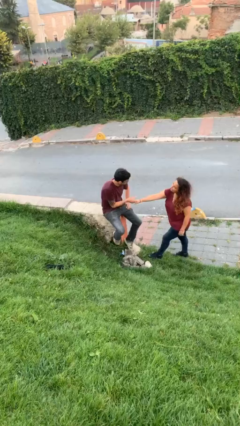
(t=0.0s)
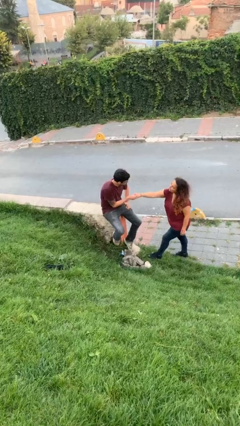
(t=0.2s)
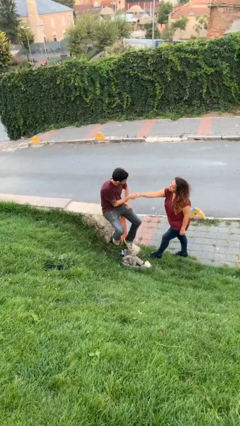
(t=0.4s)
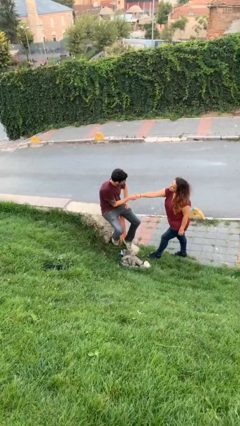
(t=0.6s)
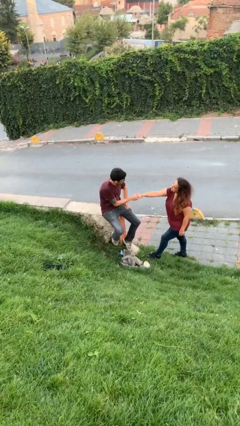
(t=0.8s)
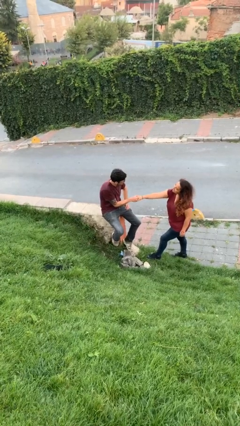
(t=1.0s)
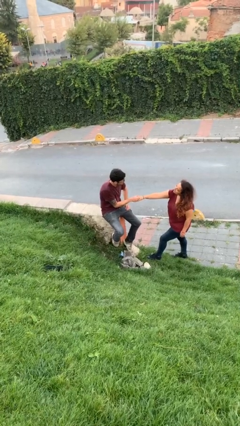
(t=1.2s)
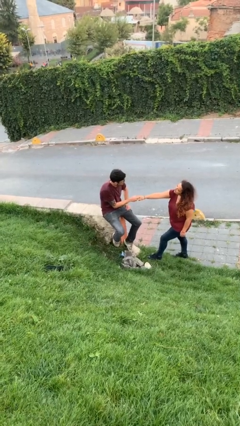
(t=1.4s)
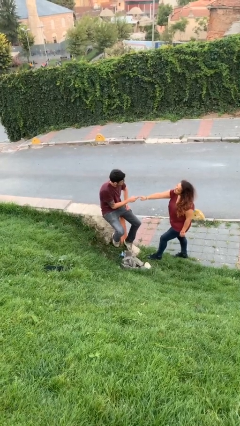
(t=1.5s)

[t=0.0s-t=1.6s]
person shakes hand

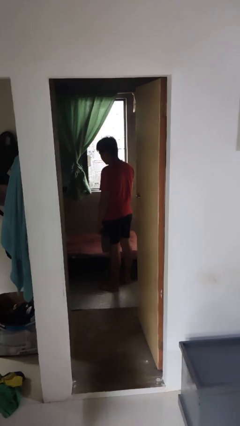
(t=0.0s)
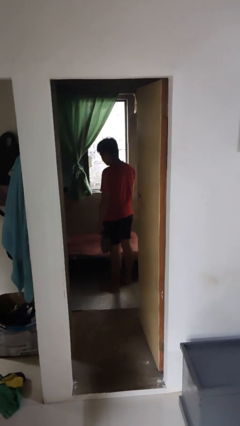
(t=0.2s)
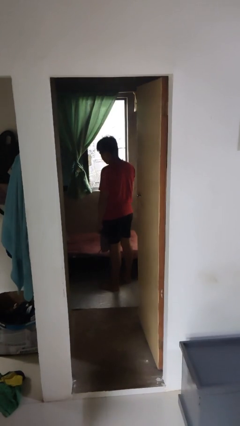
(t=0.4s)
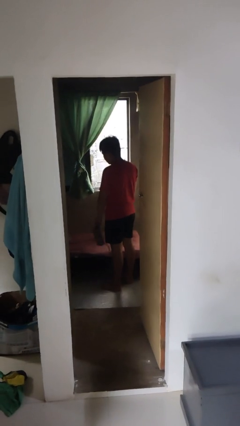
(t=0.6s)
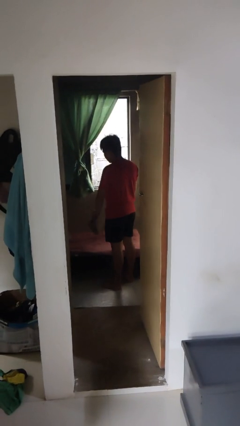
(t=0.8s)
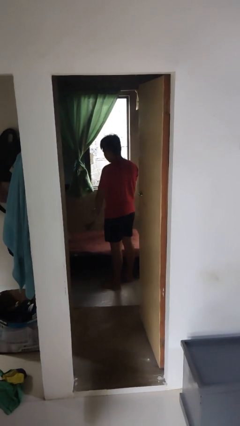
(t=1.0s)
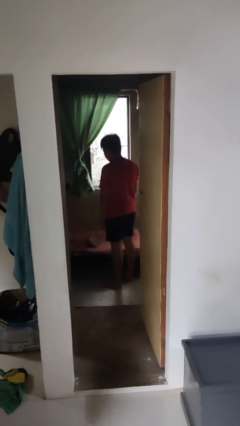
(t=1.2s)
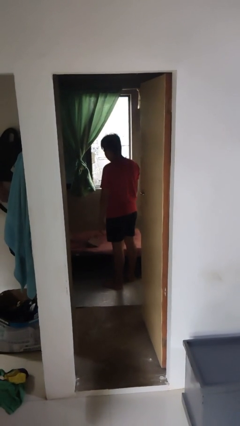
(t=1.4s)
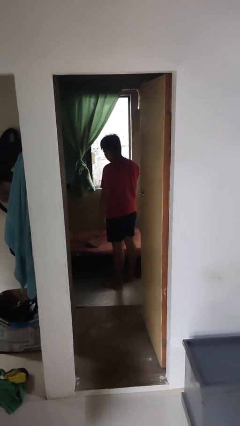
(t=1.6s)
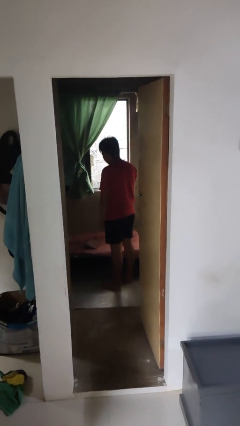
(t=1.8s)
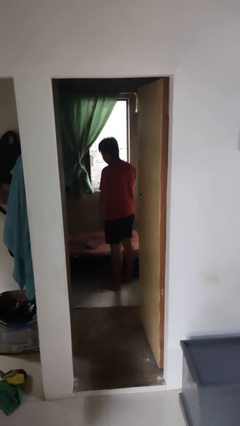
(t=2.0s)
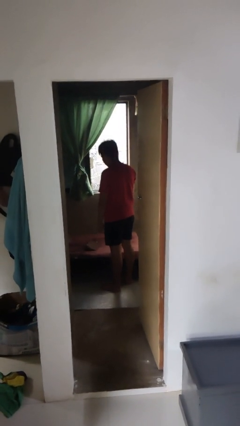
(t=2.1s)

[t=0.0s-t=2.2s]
person throws object on bed

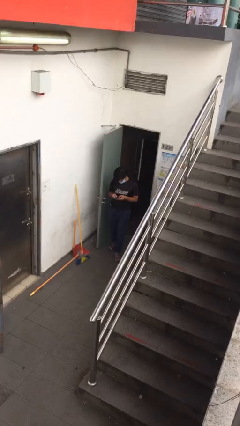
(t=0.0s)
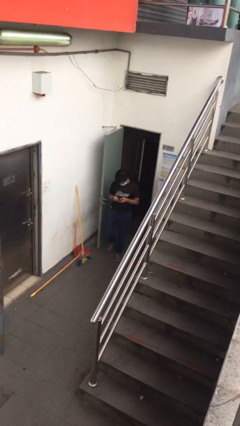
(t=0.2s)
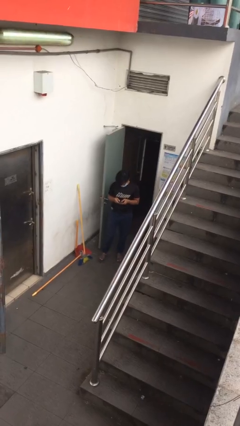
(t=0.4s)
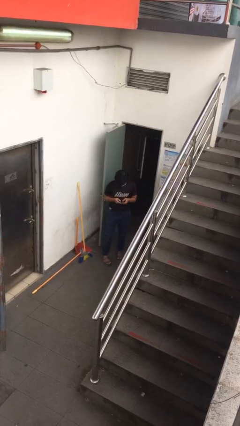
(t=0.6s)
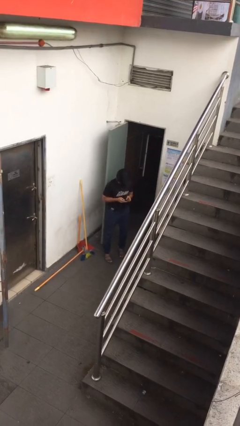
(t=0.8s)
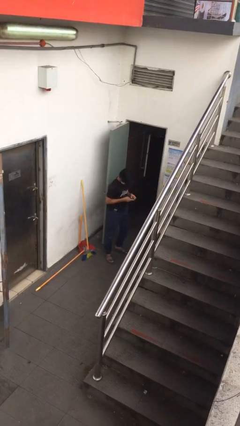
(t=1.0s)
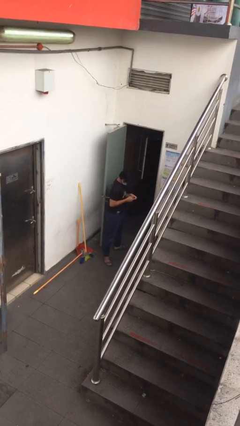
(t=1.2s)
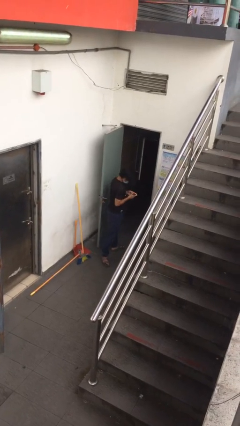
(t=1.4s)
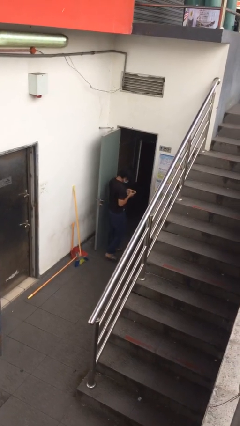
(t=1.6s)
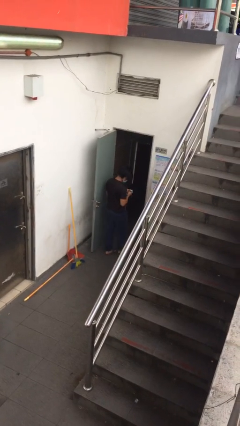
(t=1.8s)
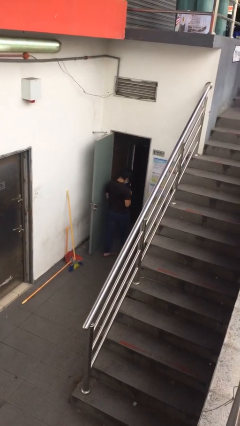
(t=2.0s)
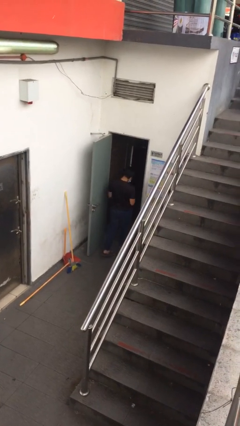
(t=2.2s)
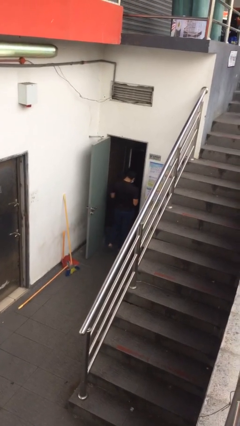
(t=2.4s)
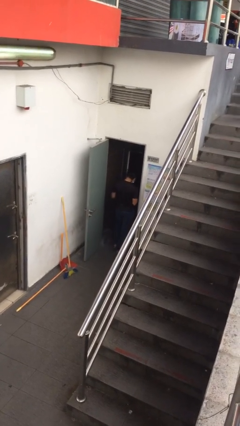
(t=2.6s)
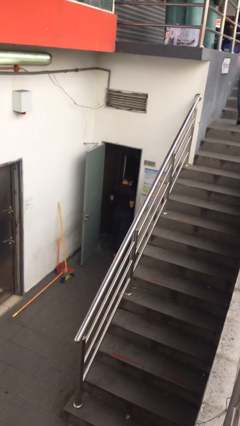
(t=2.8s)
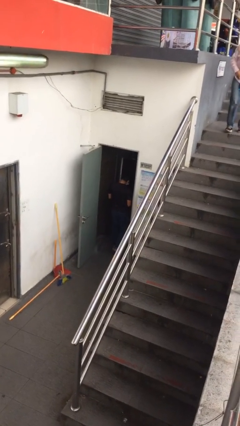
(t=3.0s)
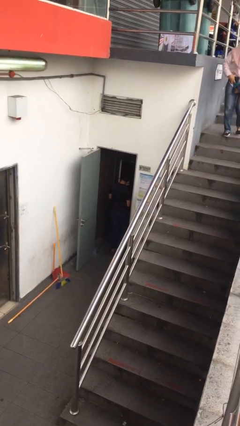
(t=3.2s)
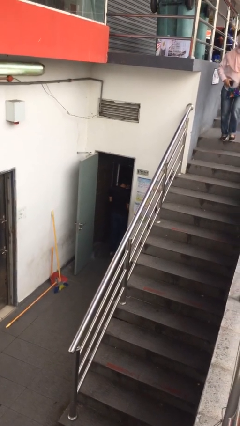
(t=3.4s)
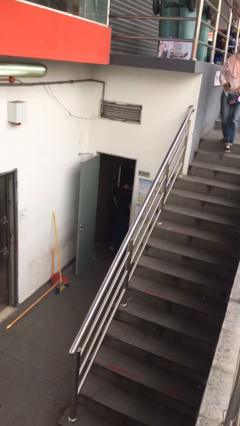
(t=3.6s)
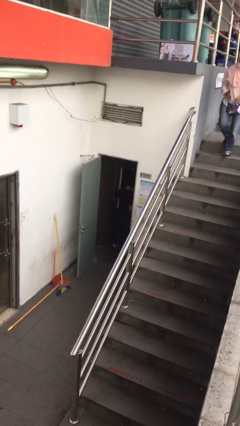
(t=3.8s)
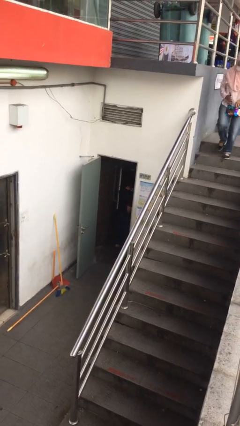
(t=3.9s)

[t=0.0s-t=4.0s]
person exits scene through structure

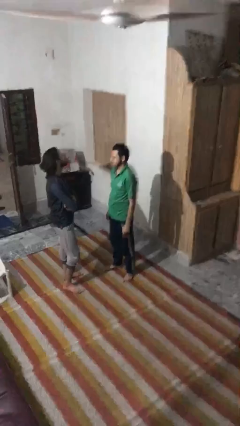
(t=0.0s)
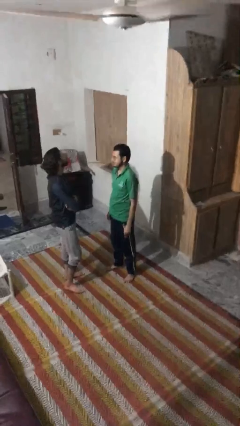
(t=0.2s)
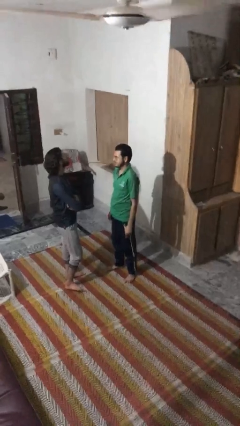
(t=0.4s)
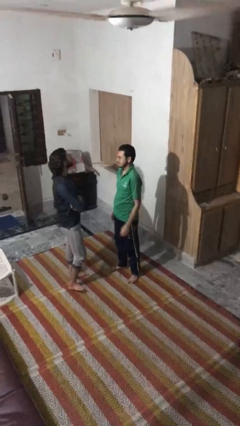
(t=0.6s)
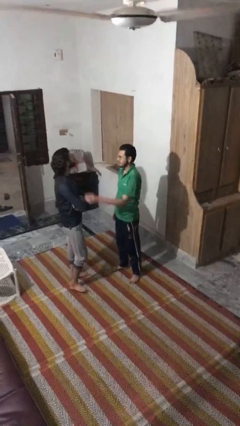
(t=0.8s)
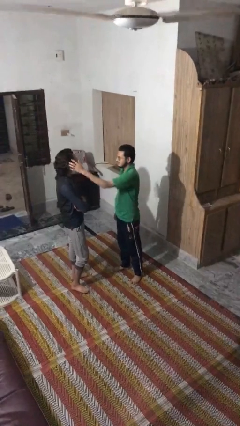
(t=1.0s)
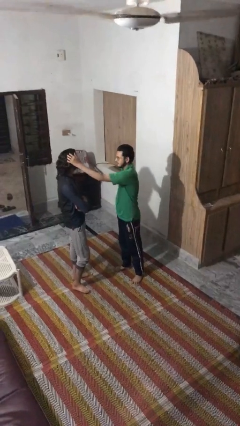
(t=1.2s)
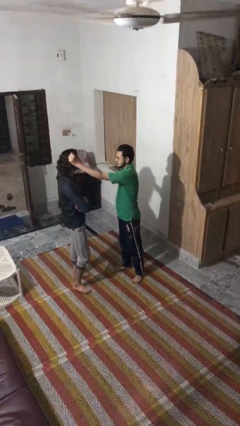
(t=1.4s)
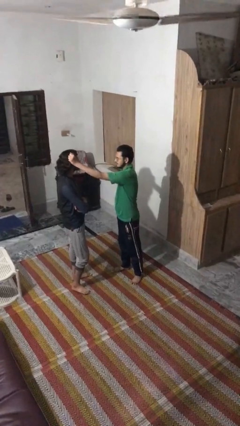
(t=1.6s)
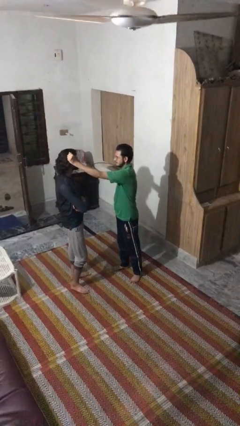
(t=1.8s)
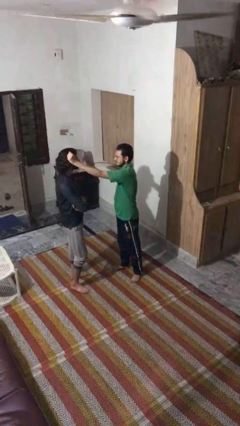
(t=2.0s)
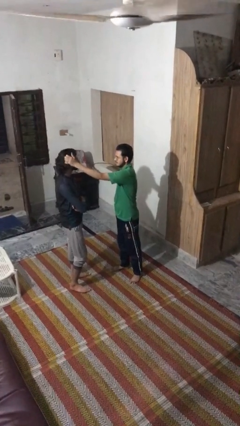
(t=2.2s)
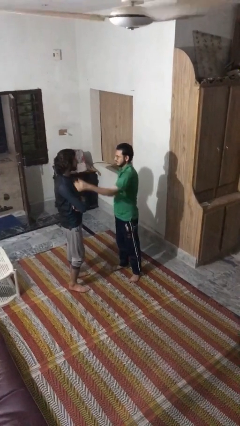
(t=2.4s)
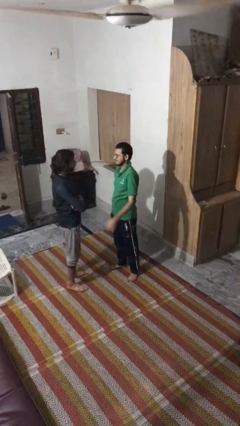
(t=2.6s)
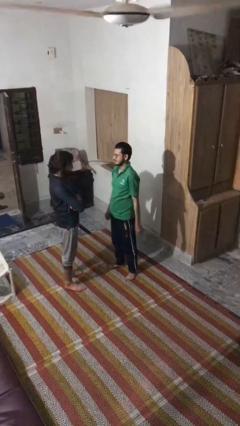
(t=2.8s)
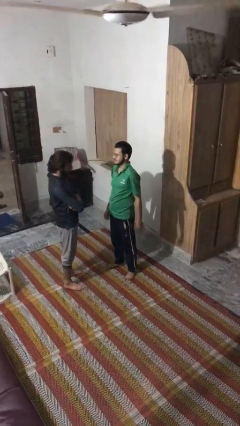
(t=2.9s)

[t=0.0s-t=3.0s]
person grabs person by hair

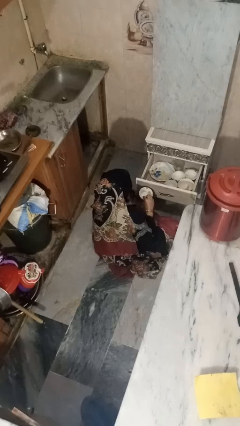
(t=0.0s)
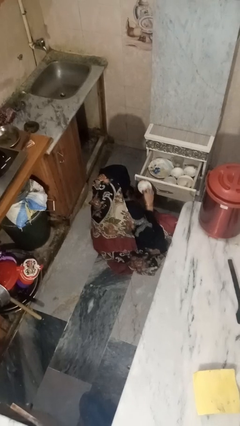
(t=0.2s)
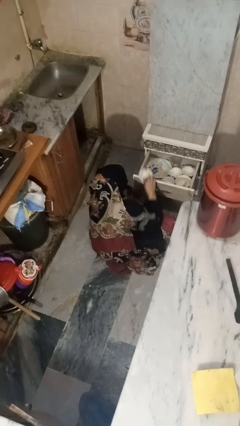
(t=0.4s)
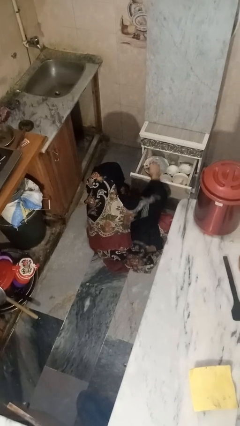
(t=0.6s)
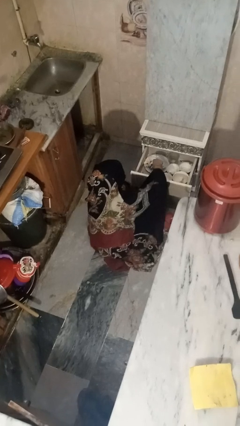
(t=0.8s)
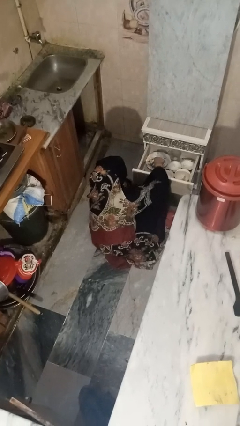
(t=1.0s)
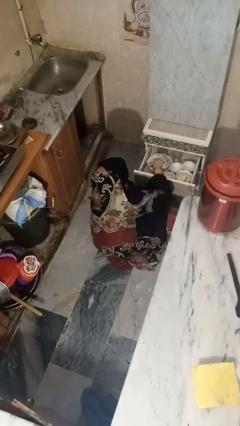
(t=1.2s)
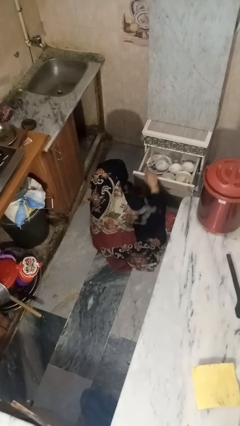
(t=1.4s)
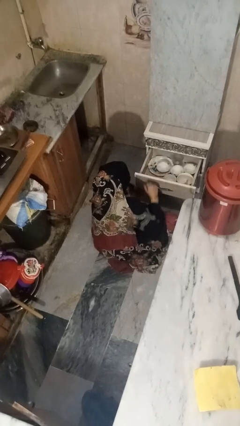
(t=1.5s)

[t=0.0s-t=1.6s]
person puts object into kitchen drawer

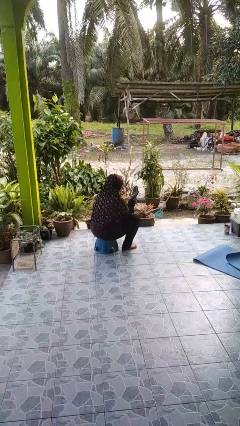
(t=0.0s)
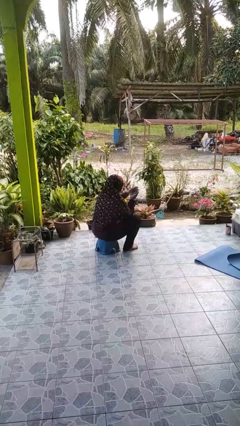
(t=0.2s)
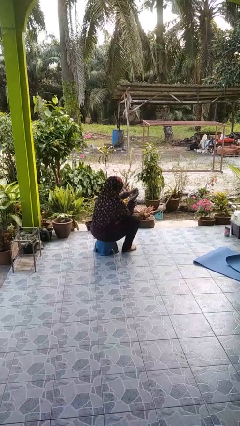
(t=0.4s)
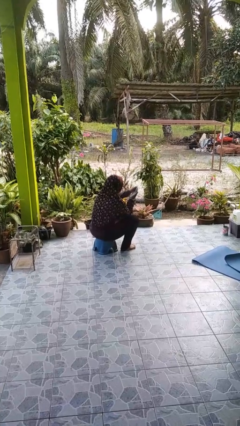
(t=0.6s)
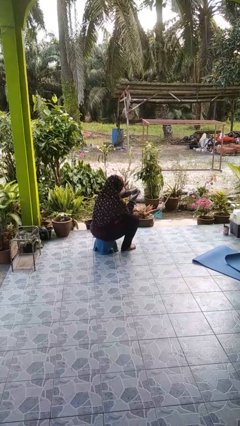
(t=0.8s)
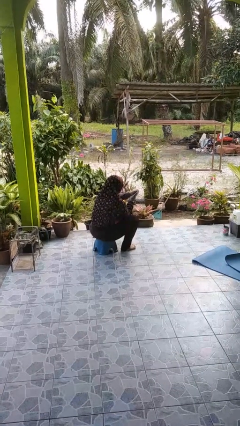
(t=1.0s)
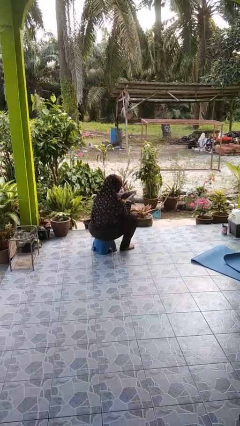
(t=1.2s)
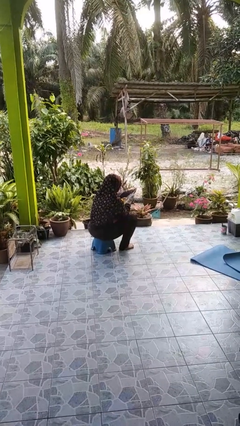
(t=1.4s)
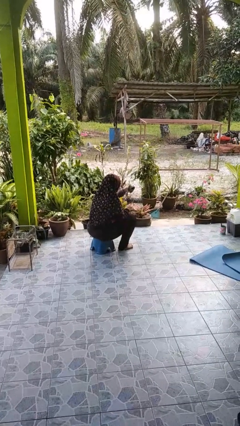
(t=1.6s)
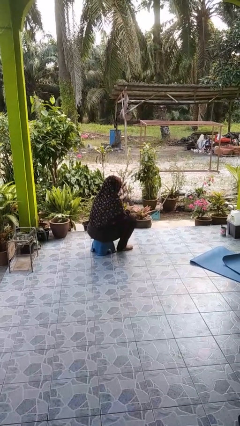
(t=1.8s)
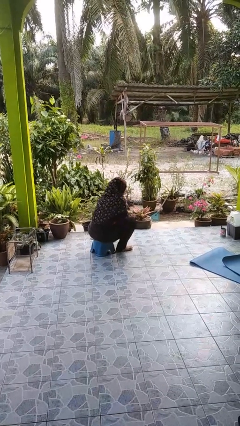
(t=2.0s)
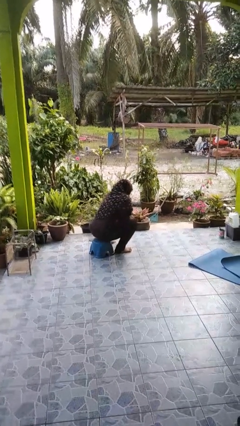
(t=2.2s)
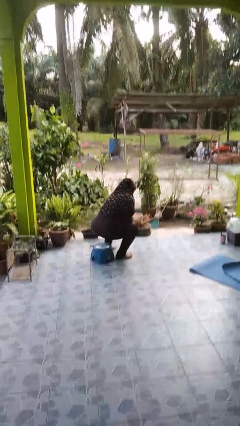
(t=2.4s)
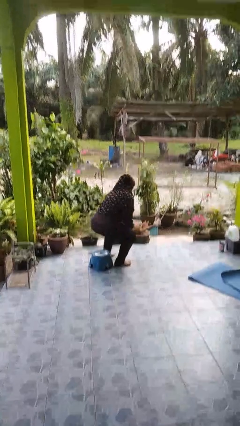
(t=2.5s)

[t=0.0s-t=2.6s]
person takes off gloves

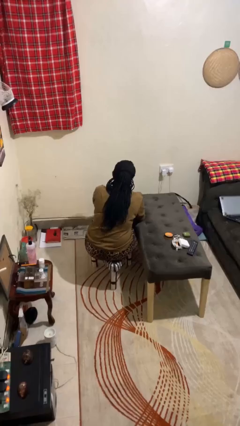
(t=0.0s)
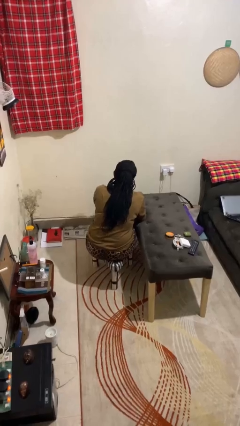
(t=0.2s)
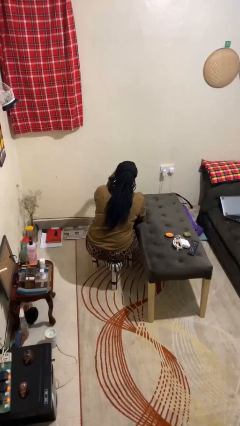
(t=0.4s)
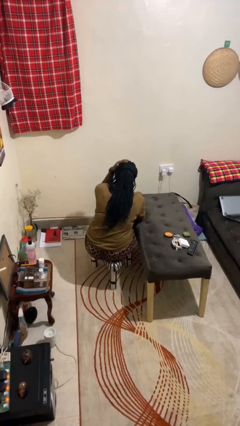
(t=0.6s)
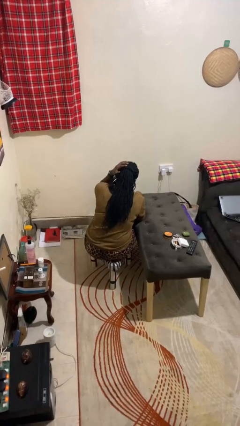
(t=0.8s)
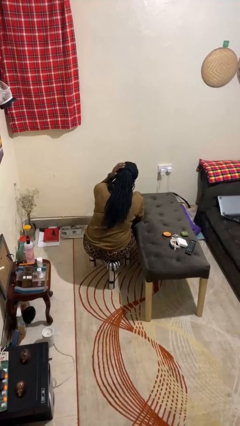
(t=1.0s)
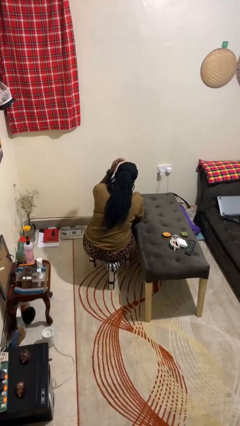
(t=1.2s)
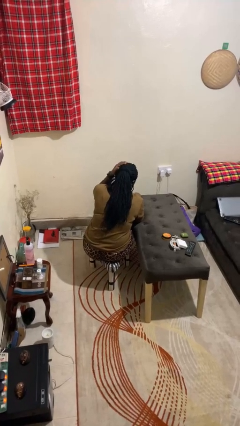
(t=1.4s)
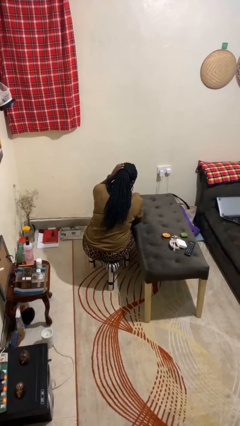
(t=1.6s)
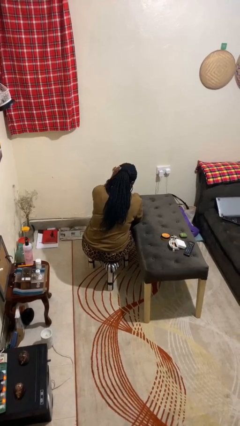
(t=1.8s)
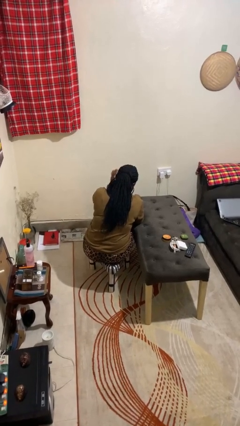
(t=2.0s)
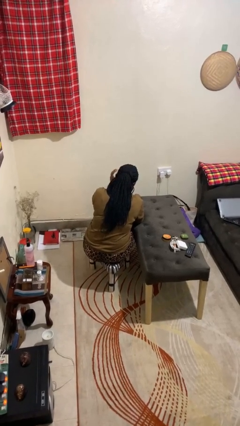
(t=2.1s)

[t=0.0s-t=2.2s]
person strokes hair
